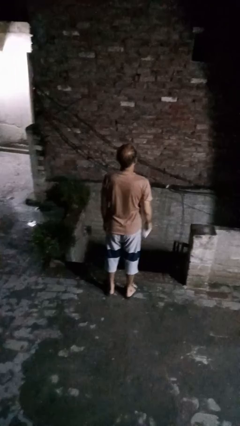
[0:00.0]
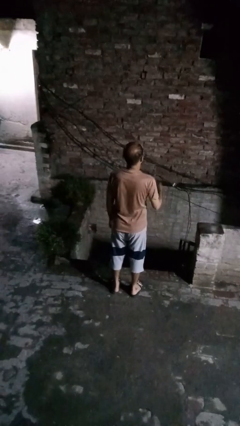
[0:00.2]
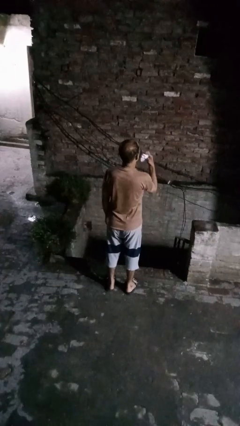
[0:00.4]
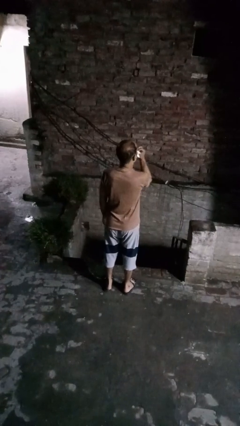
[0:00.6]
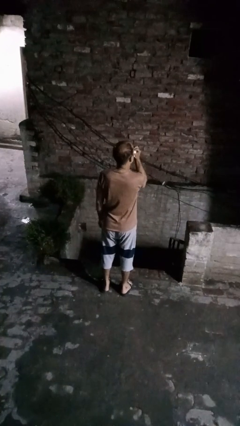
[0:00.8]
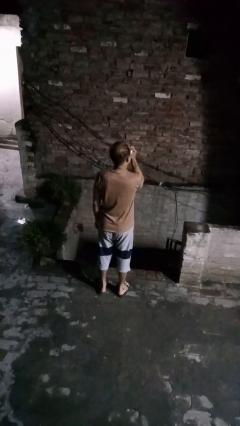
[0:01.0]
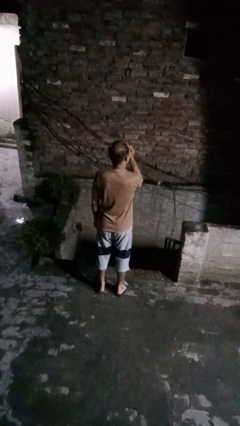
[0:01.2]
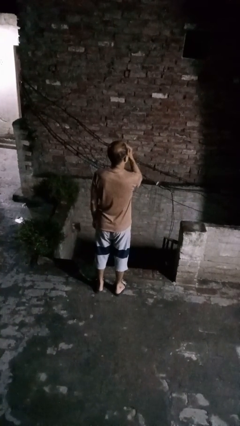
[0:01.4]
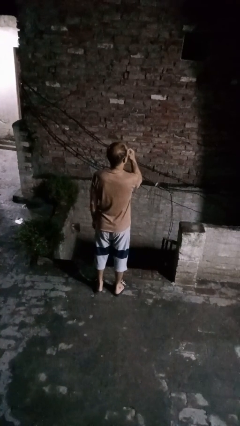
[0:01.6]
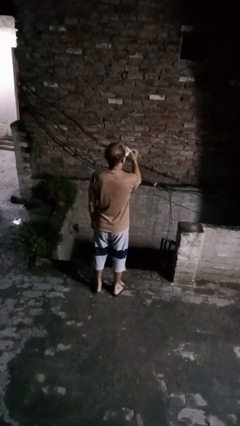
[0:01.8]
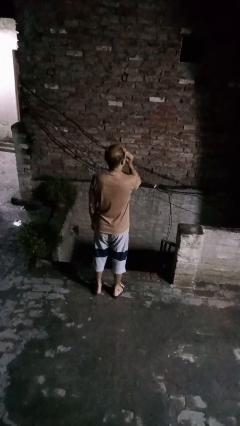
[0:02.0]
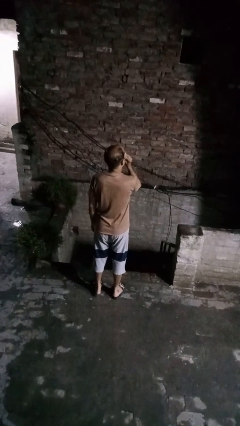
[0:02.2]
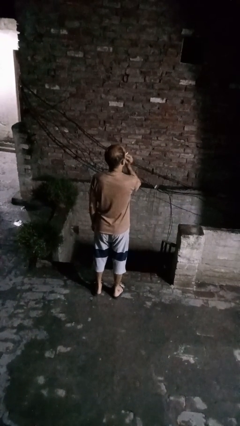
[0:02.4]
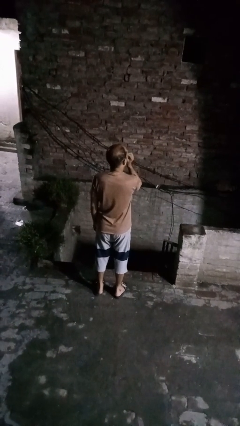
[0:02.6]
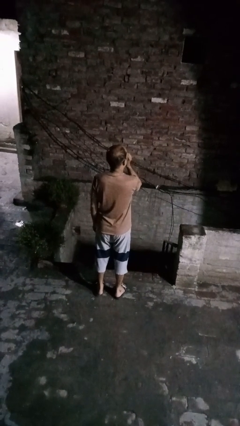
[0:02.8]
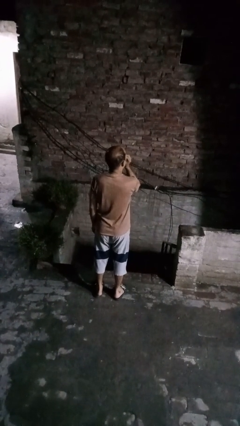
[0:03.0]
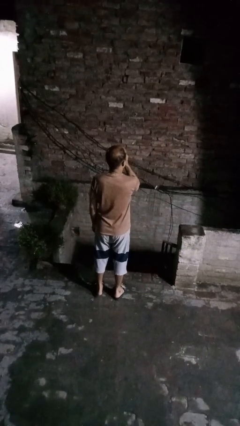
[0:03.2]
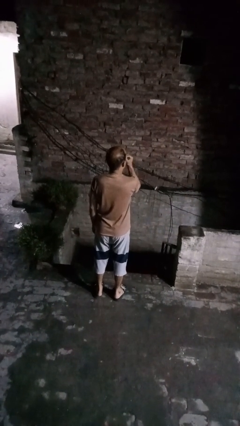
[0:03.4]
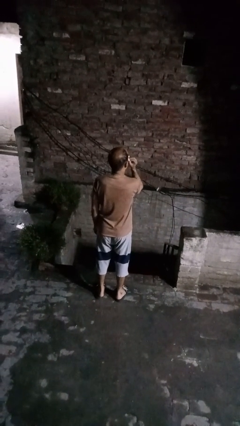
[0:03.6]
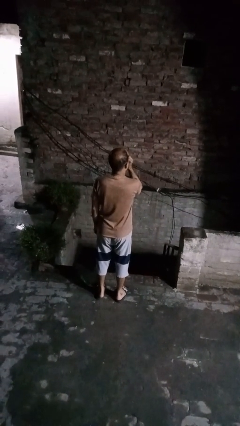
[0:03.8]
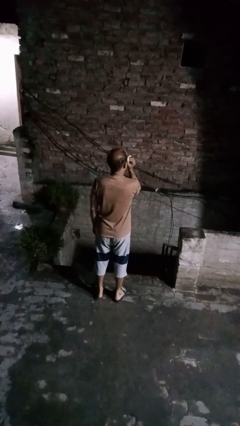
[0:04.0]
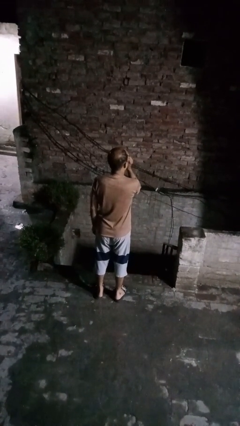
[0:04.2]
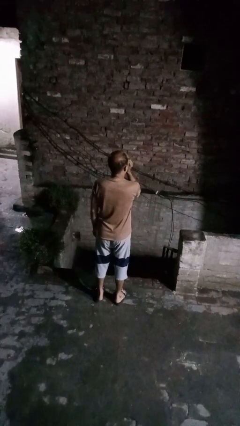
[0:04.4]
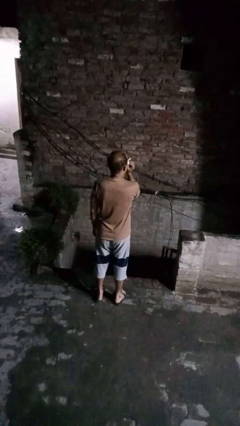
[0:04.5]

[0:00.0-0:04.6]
person blows nose

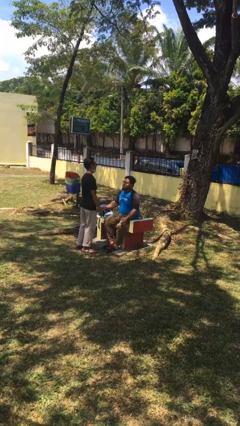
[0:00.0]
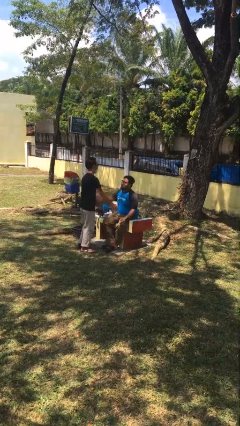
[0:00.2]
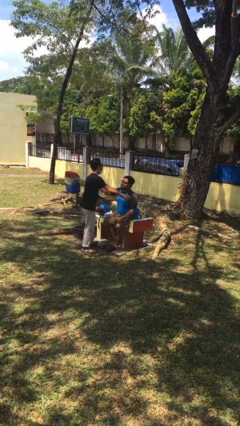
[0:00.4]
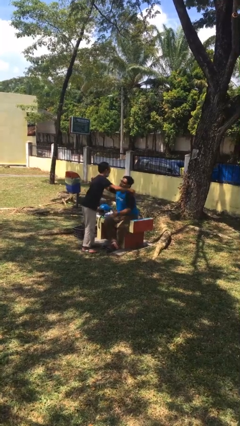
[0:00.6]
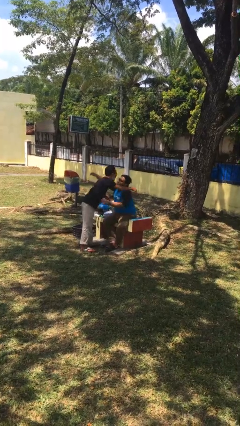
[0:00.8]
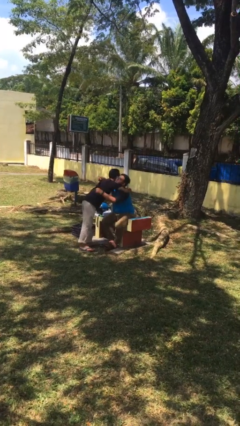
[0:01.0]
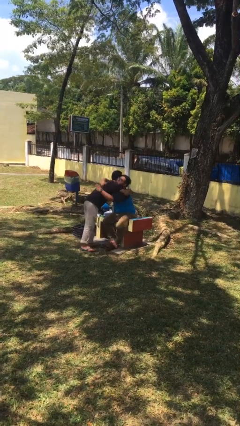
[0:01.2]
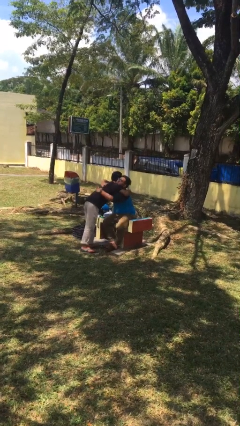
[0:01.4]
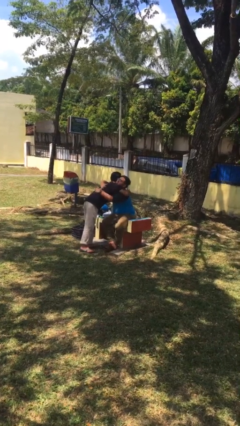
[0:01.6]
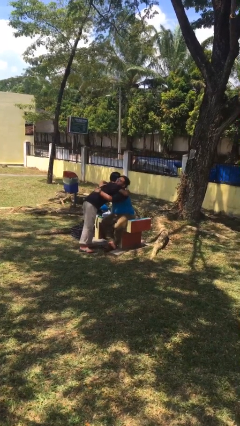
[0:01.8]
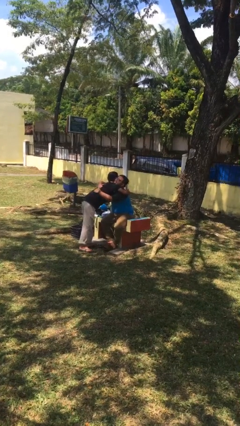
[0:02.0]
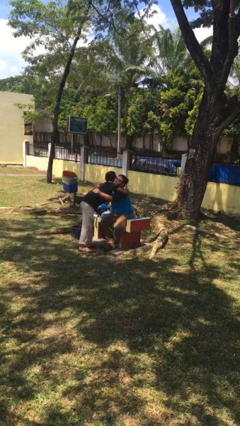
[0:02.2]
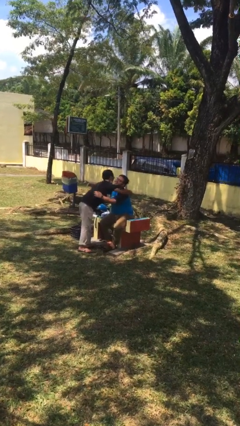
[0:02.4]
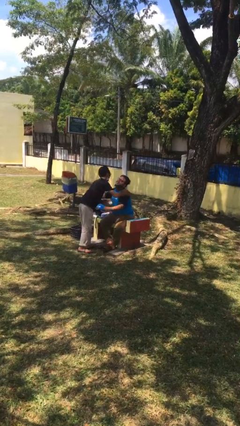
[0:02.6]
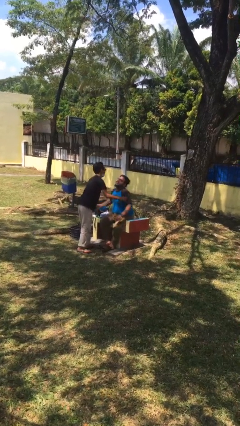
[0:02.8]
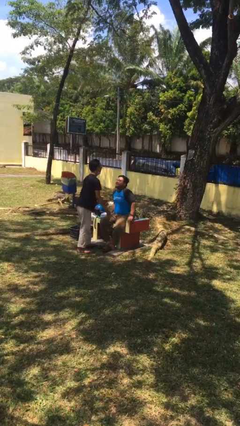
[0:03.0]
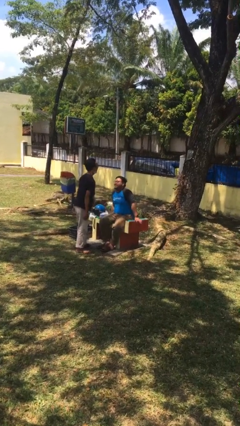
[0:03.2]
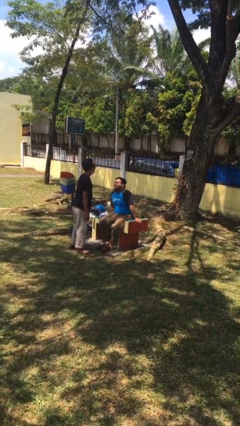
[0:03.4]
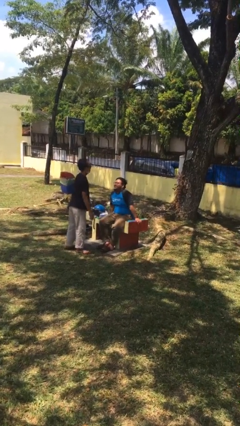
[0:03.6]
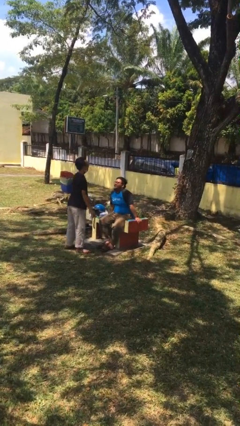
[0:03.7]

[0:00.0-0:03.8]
person embraces person

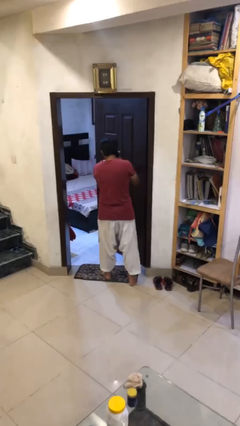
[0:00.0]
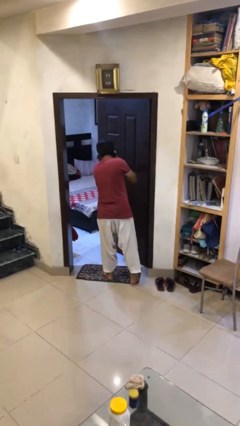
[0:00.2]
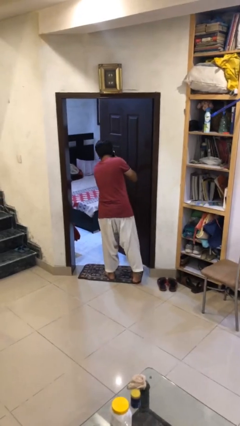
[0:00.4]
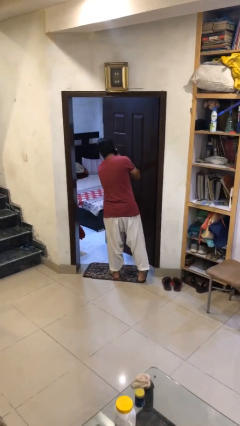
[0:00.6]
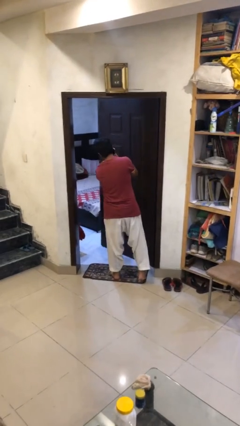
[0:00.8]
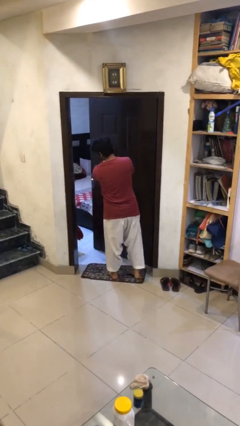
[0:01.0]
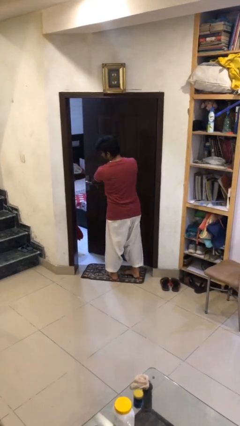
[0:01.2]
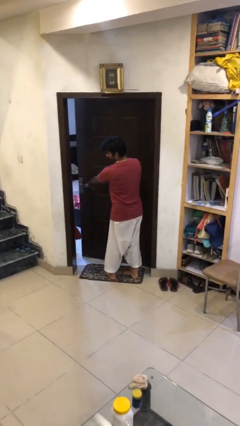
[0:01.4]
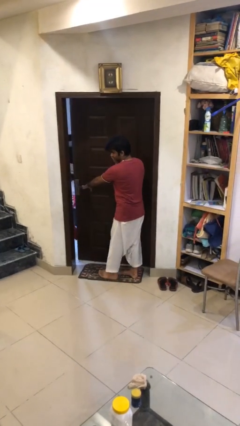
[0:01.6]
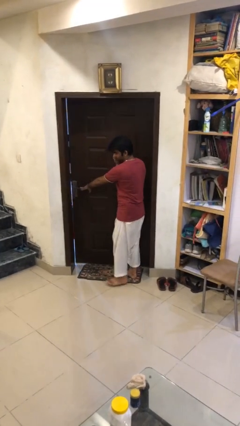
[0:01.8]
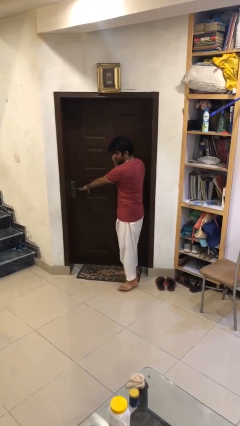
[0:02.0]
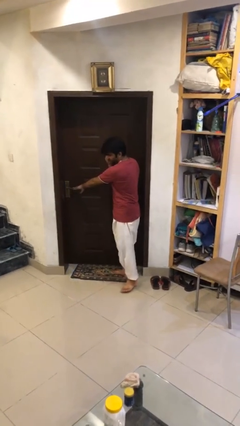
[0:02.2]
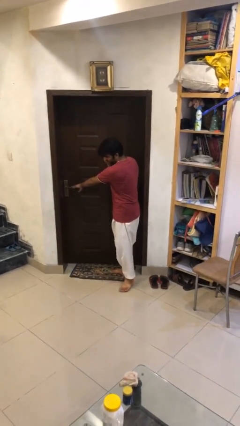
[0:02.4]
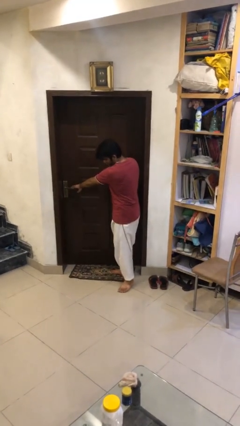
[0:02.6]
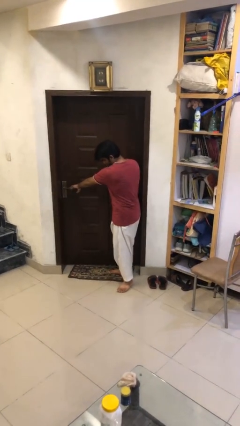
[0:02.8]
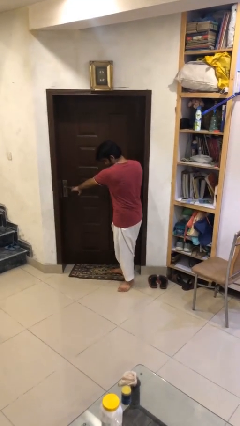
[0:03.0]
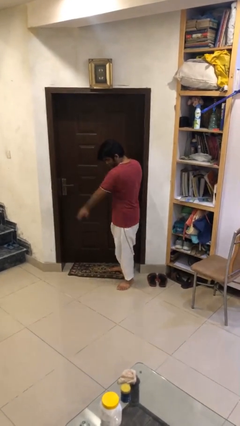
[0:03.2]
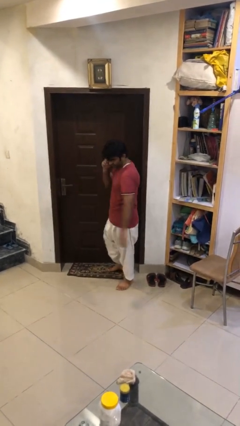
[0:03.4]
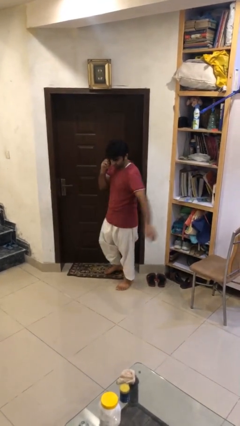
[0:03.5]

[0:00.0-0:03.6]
person closes facility door

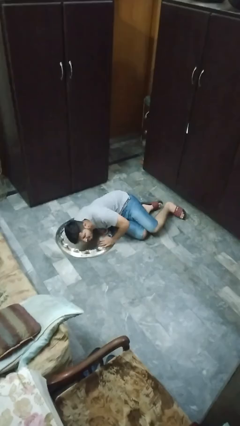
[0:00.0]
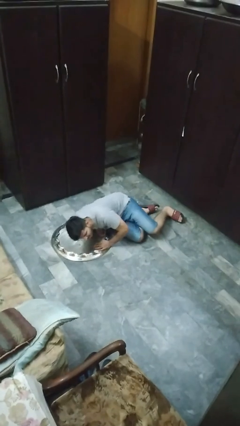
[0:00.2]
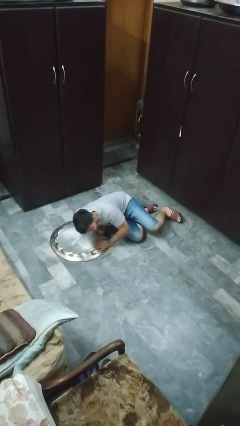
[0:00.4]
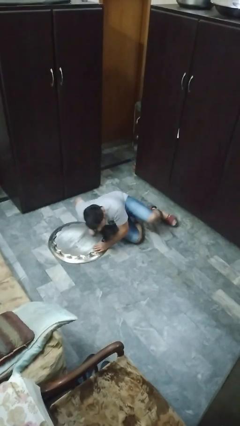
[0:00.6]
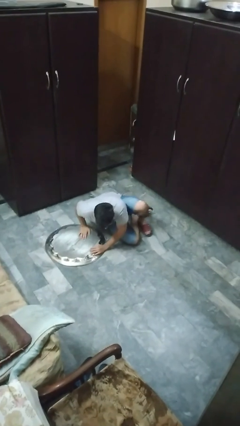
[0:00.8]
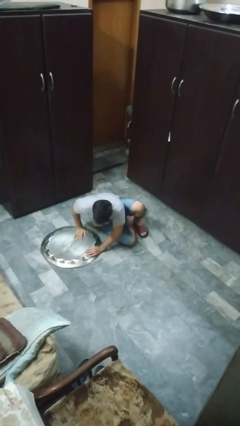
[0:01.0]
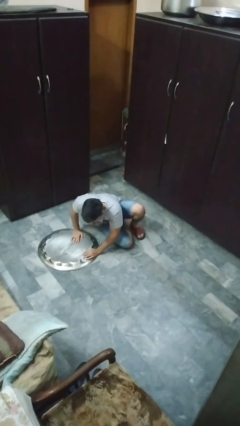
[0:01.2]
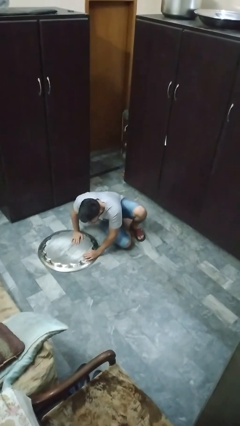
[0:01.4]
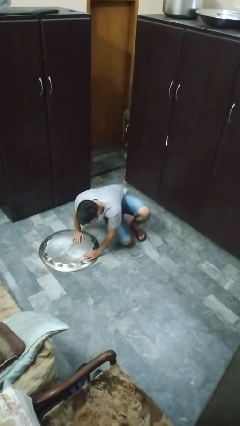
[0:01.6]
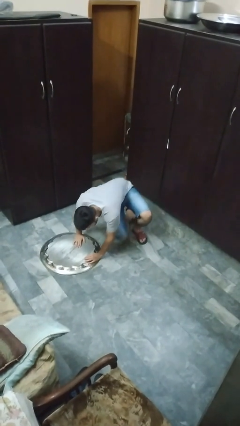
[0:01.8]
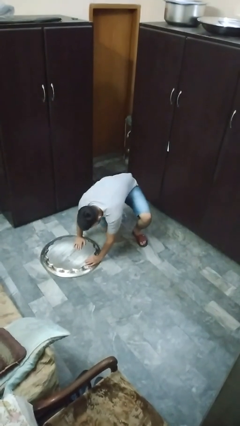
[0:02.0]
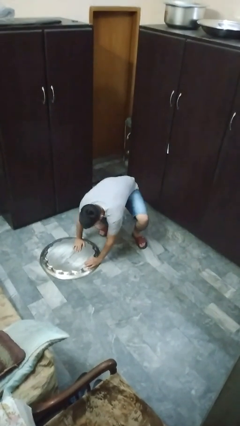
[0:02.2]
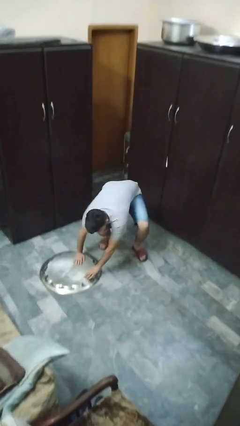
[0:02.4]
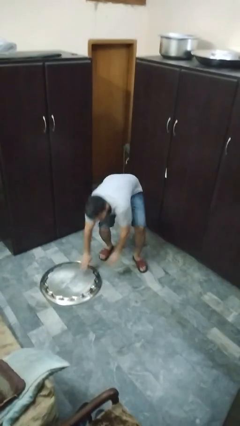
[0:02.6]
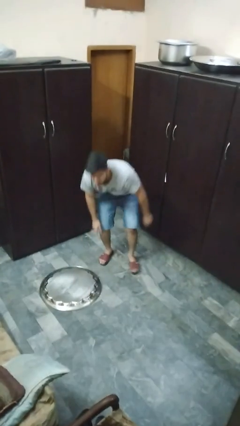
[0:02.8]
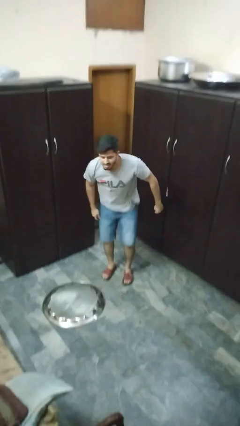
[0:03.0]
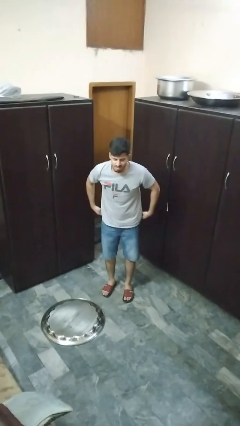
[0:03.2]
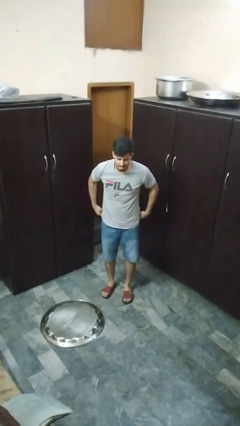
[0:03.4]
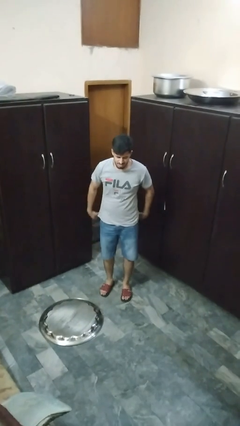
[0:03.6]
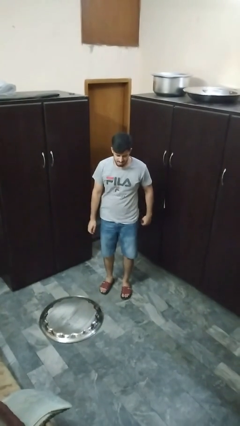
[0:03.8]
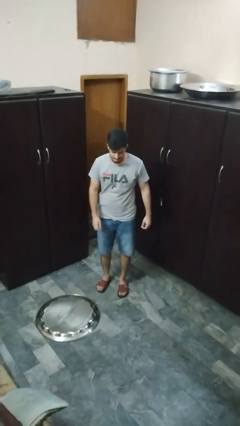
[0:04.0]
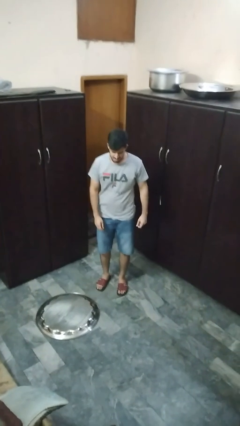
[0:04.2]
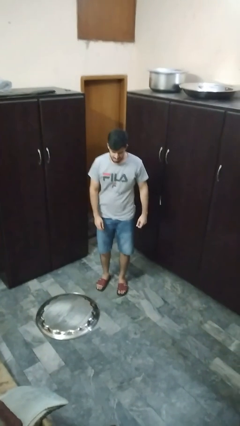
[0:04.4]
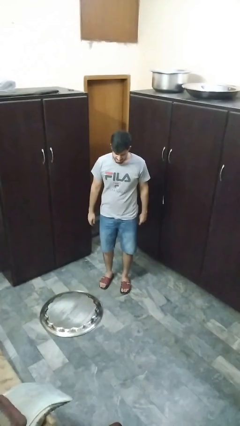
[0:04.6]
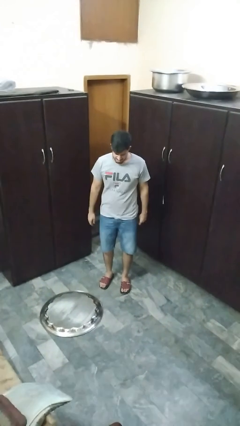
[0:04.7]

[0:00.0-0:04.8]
person stands up from floor

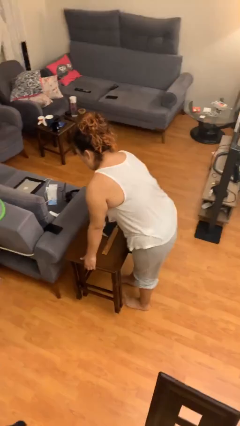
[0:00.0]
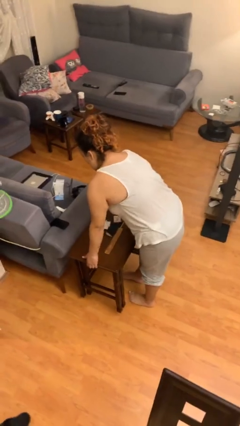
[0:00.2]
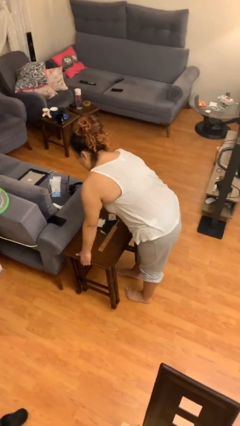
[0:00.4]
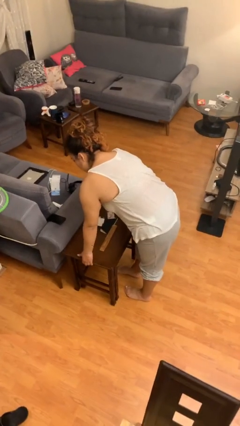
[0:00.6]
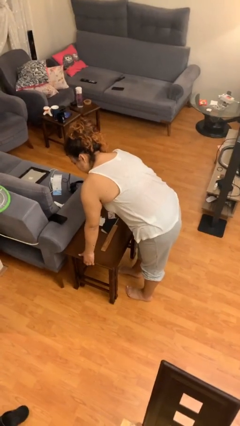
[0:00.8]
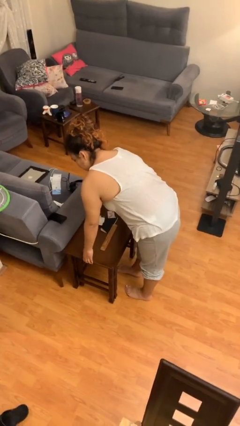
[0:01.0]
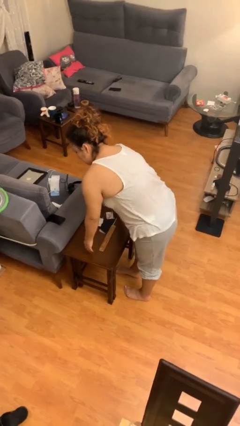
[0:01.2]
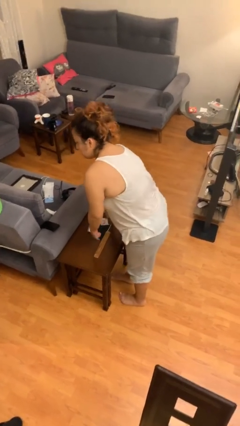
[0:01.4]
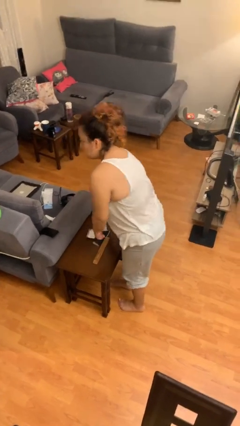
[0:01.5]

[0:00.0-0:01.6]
person puts down object on floor
